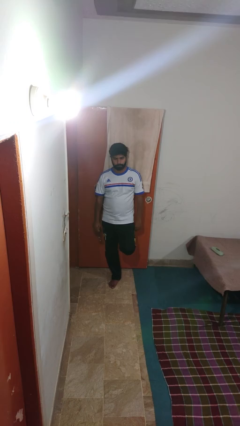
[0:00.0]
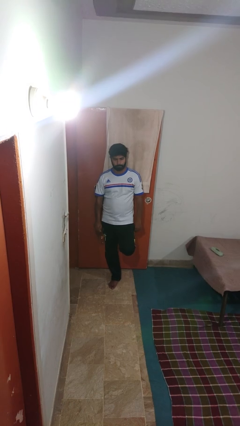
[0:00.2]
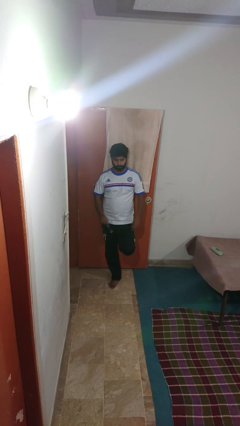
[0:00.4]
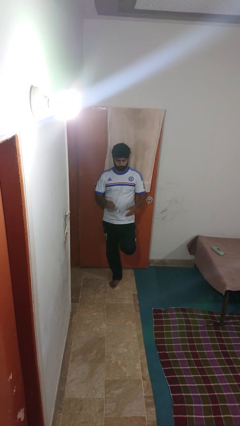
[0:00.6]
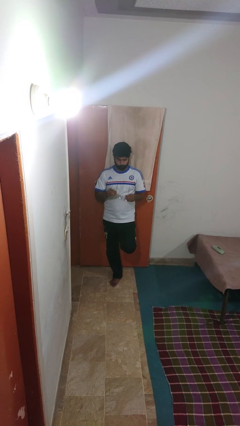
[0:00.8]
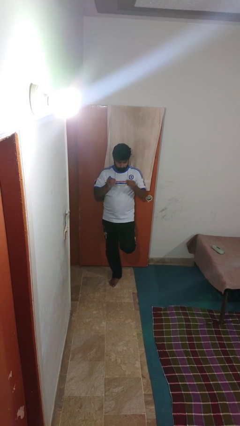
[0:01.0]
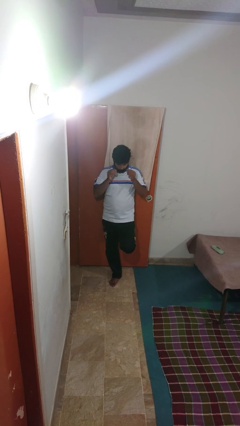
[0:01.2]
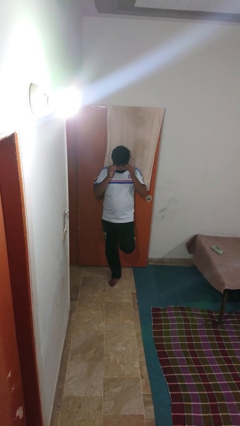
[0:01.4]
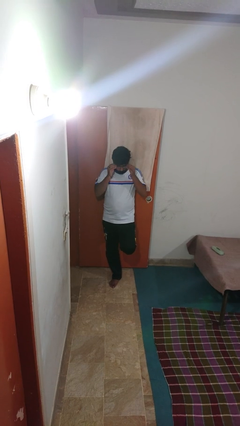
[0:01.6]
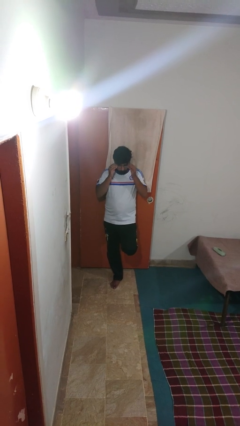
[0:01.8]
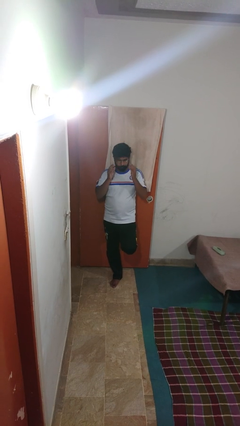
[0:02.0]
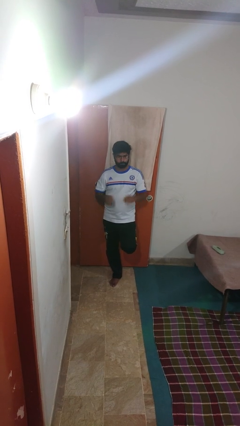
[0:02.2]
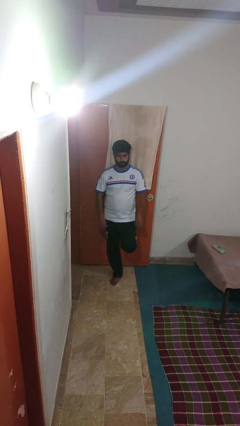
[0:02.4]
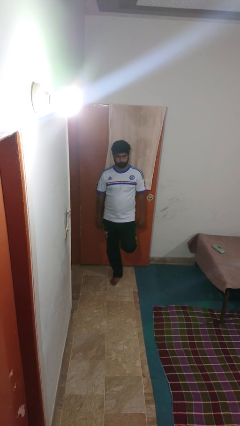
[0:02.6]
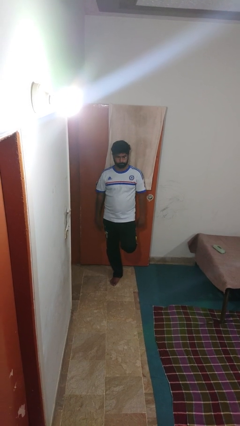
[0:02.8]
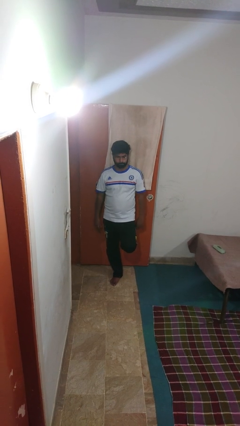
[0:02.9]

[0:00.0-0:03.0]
person puts on glasses

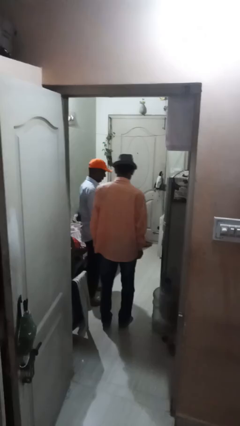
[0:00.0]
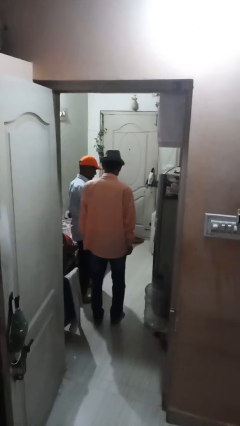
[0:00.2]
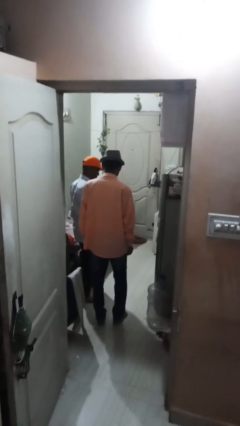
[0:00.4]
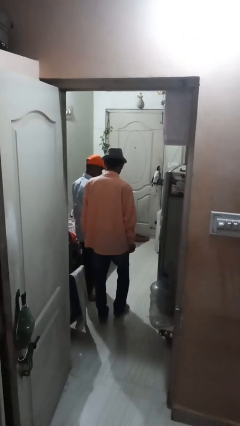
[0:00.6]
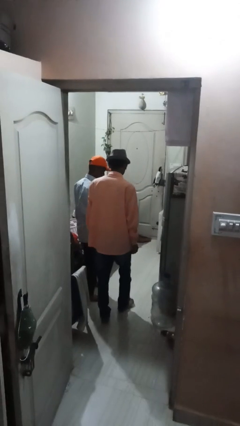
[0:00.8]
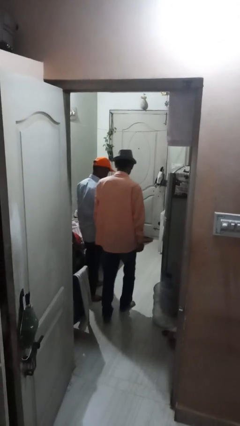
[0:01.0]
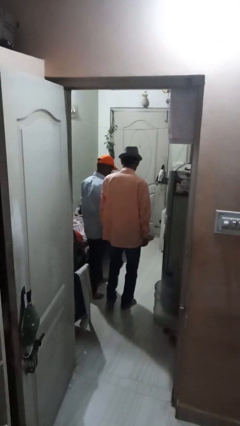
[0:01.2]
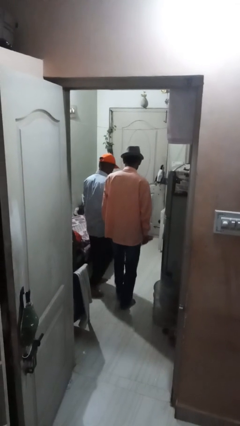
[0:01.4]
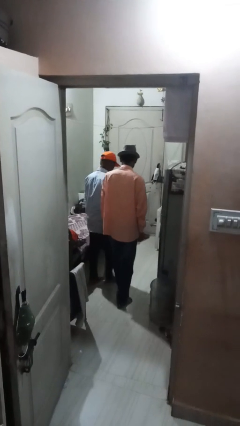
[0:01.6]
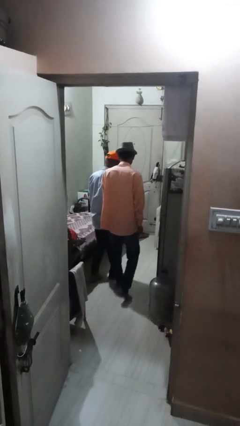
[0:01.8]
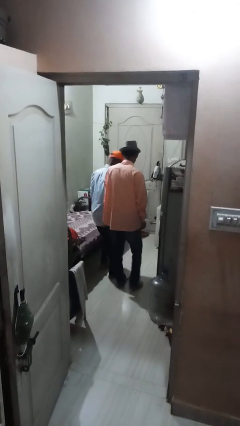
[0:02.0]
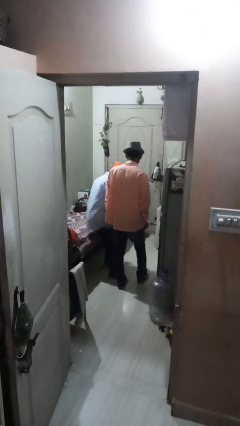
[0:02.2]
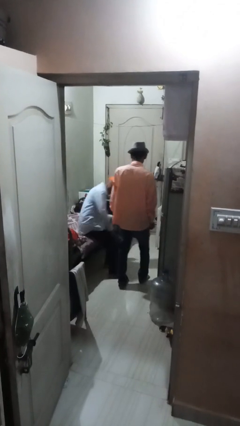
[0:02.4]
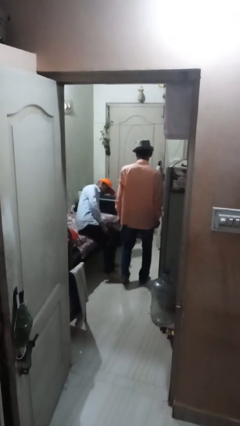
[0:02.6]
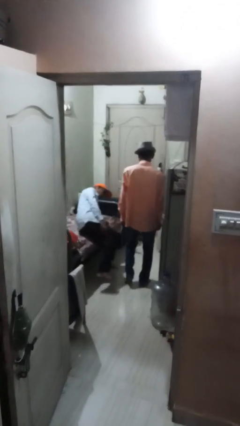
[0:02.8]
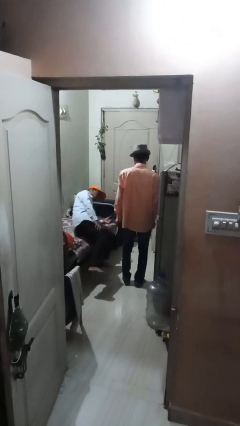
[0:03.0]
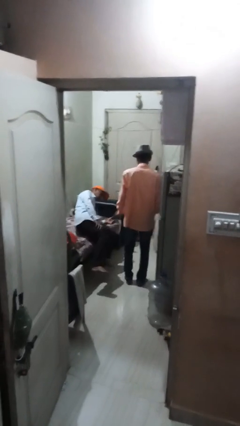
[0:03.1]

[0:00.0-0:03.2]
person bumps into person

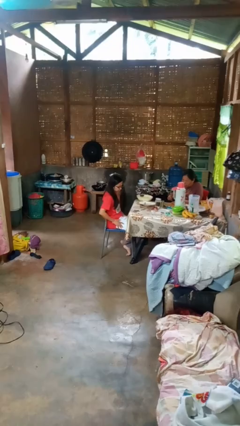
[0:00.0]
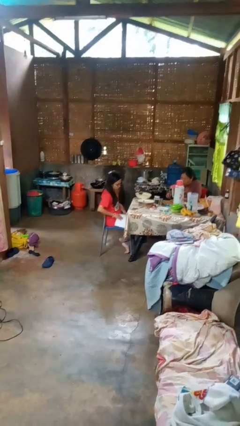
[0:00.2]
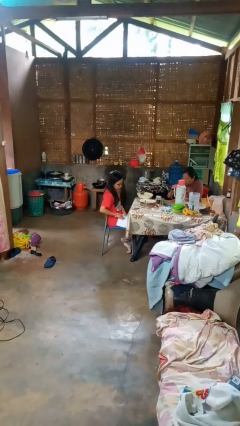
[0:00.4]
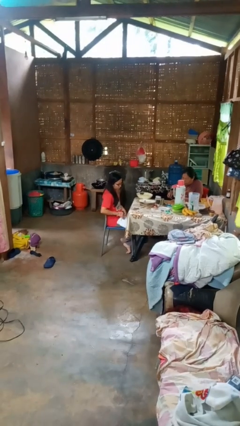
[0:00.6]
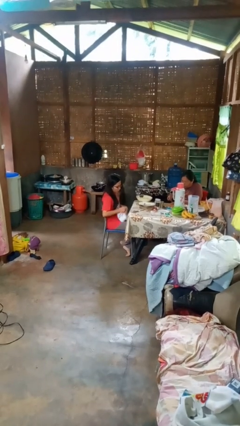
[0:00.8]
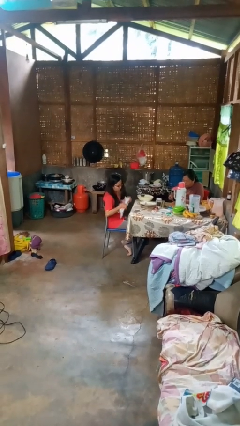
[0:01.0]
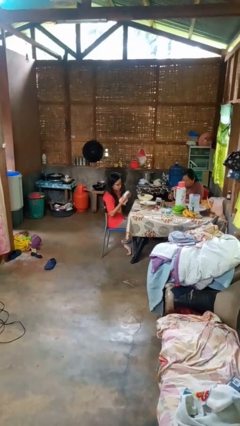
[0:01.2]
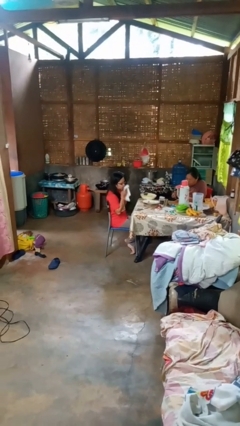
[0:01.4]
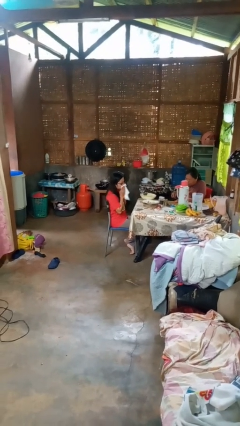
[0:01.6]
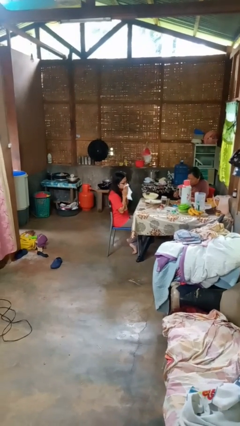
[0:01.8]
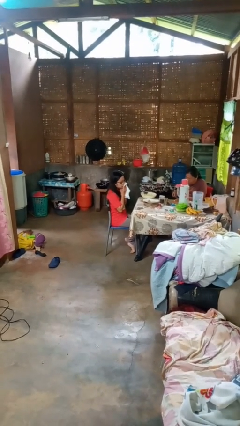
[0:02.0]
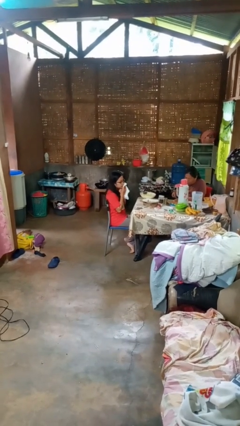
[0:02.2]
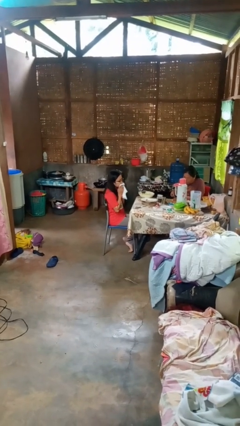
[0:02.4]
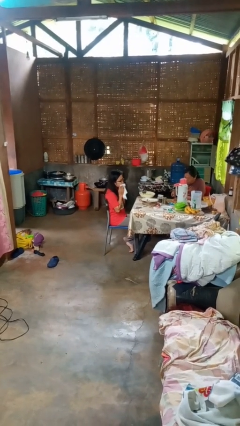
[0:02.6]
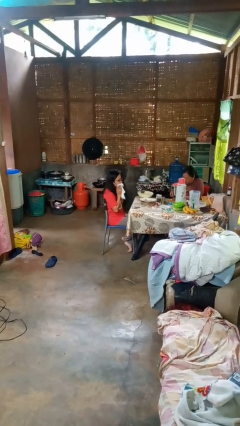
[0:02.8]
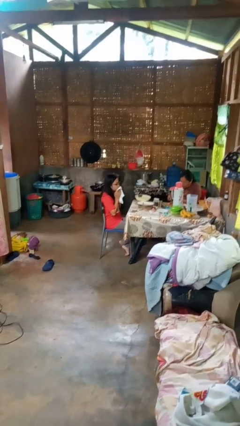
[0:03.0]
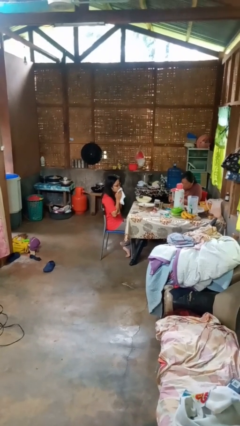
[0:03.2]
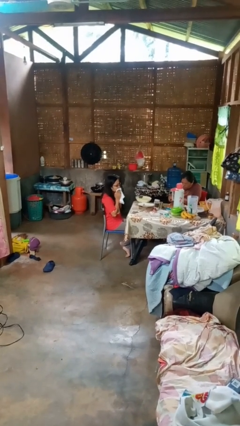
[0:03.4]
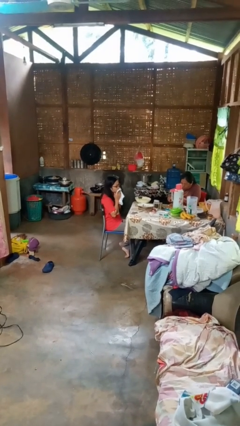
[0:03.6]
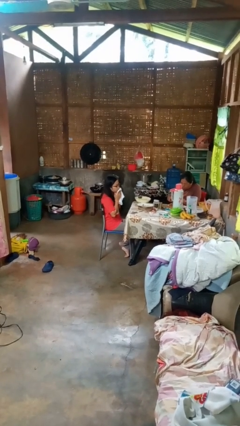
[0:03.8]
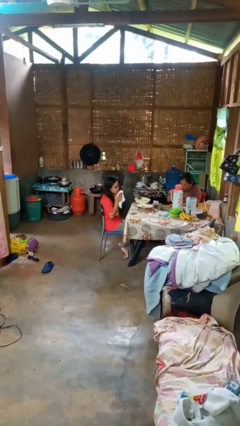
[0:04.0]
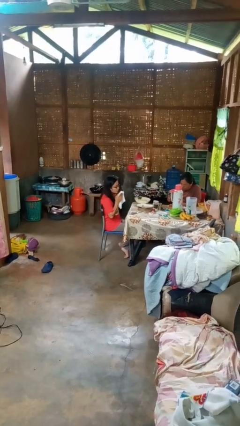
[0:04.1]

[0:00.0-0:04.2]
person wipes mouth with napkin

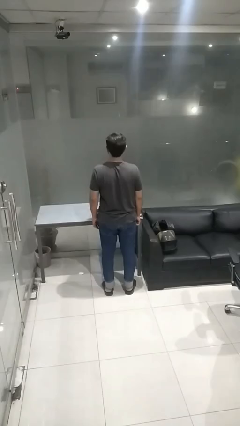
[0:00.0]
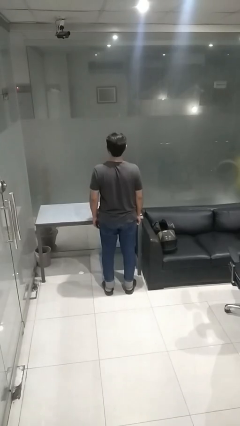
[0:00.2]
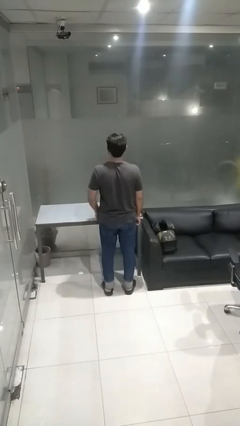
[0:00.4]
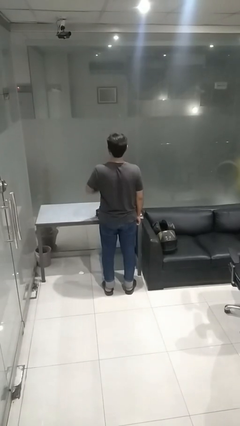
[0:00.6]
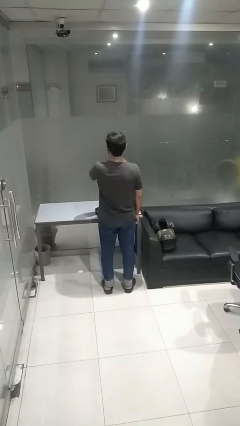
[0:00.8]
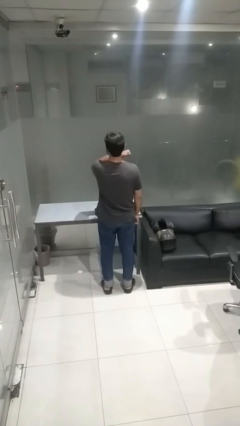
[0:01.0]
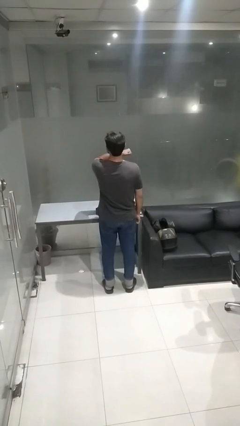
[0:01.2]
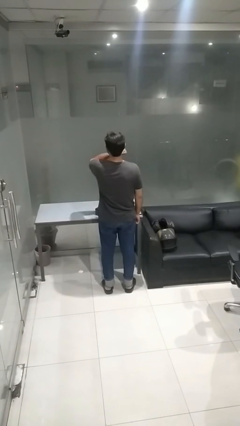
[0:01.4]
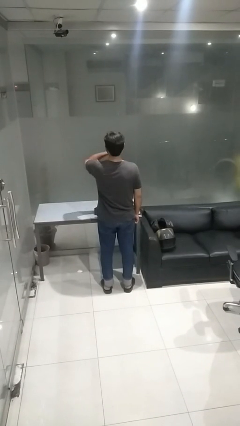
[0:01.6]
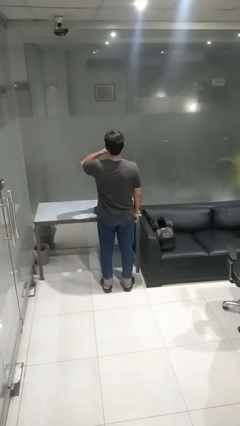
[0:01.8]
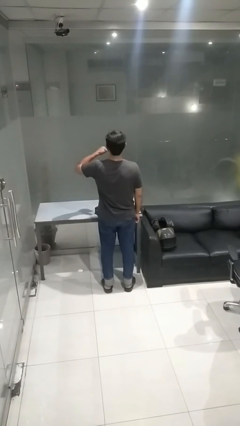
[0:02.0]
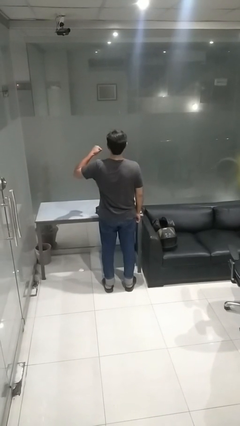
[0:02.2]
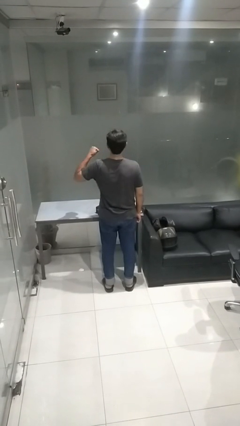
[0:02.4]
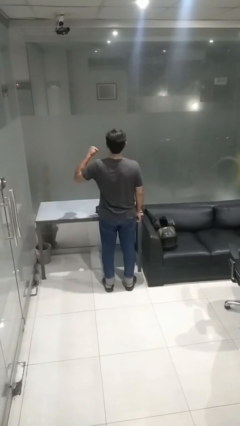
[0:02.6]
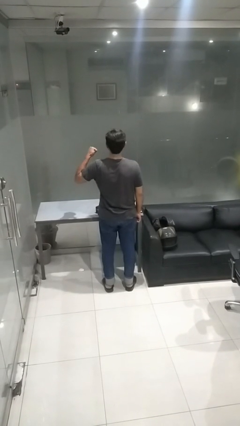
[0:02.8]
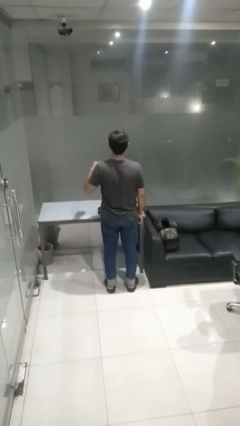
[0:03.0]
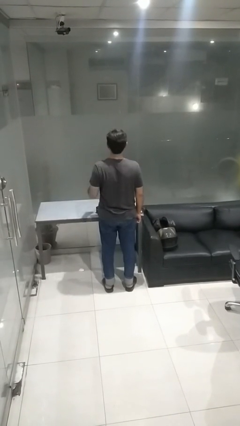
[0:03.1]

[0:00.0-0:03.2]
person gestures cut

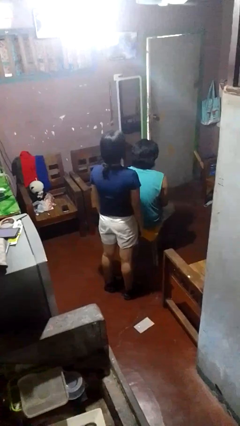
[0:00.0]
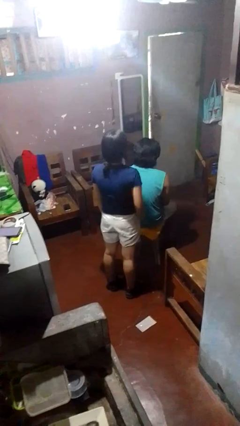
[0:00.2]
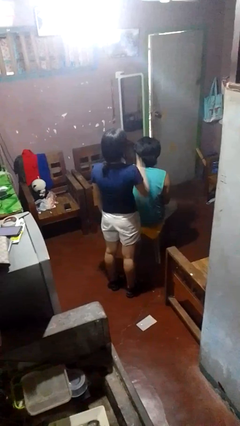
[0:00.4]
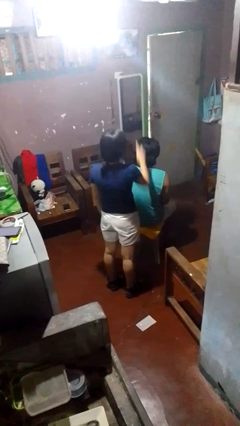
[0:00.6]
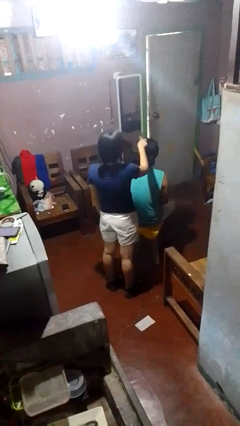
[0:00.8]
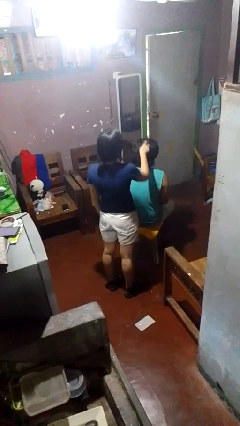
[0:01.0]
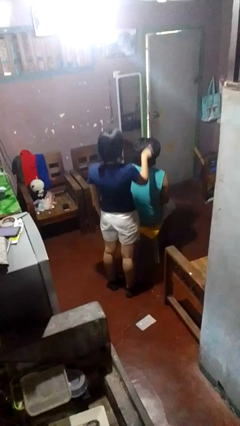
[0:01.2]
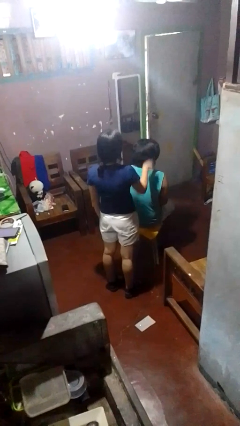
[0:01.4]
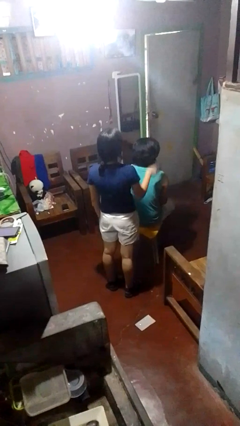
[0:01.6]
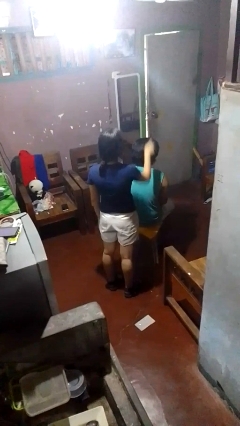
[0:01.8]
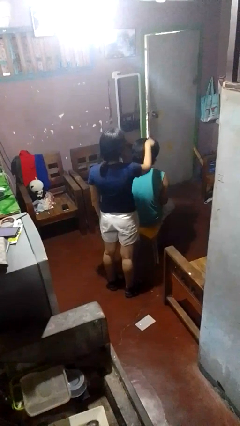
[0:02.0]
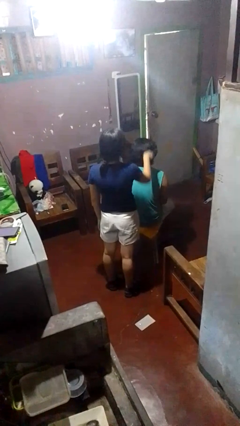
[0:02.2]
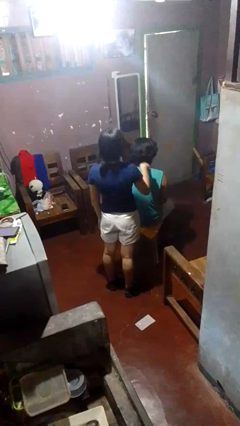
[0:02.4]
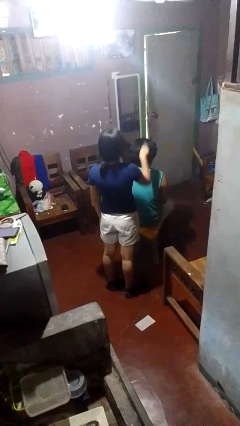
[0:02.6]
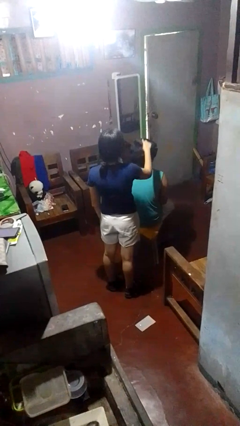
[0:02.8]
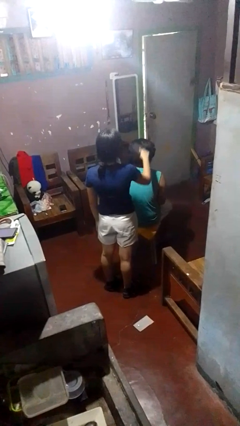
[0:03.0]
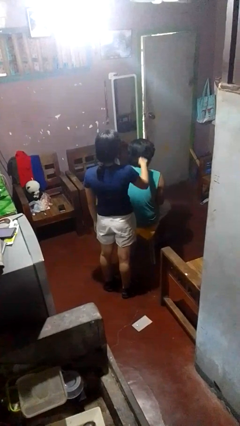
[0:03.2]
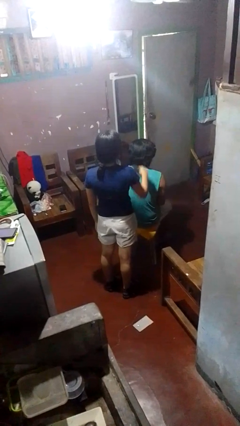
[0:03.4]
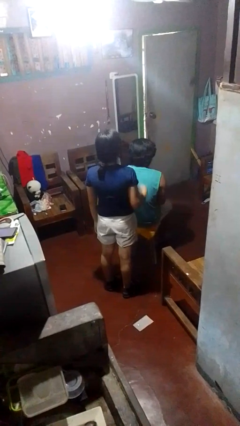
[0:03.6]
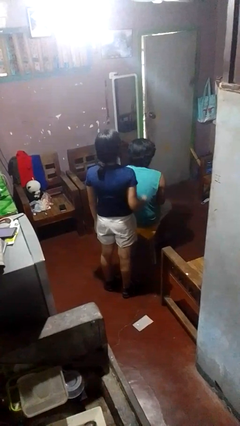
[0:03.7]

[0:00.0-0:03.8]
person brushes hair of person
